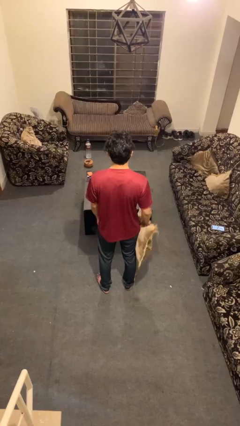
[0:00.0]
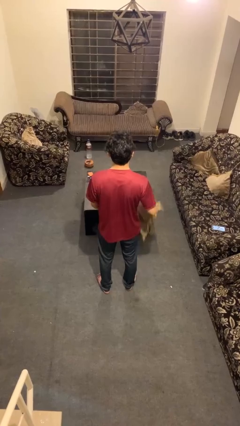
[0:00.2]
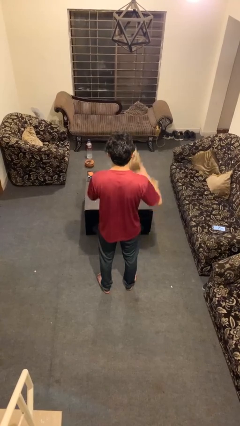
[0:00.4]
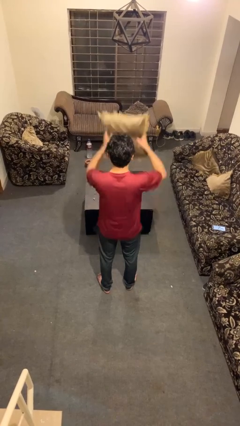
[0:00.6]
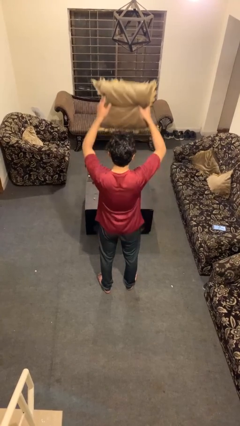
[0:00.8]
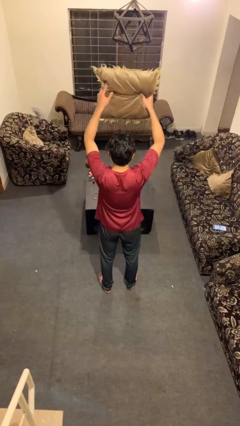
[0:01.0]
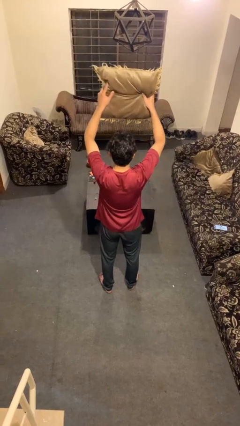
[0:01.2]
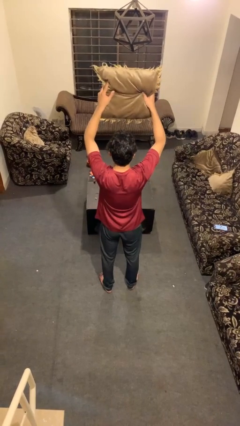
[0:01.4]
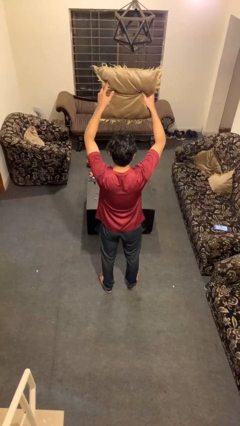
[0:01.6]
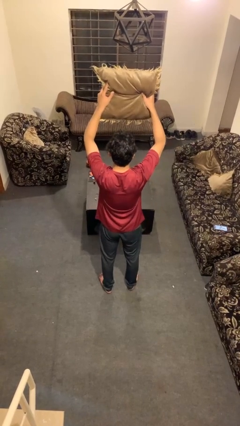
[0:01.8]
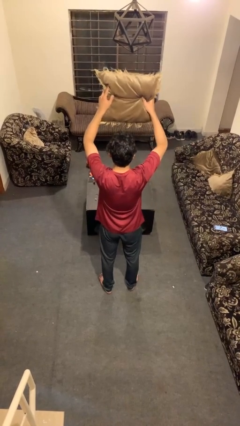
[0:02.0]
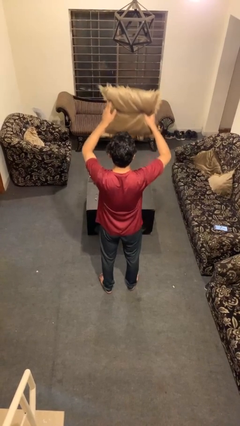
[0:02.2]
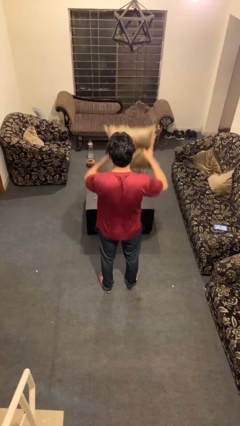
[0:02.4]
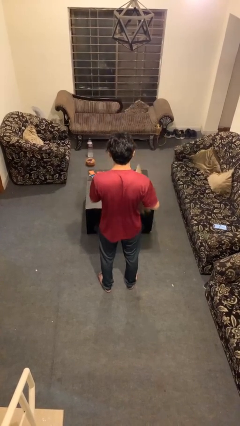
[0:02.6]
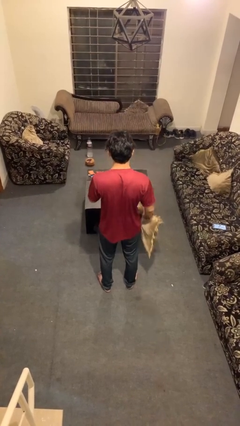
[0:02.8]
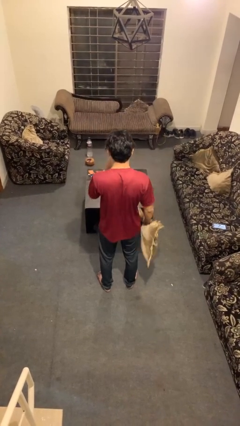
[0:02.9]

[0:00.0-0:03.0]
person holds object above head

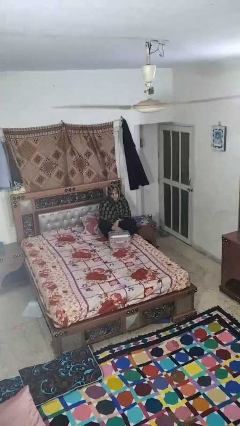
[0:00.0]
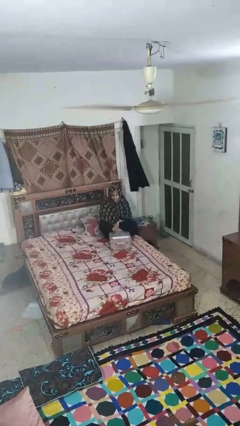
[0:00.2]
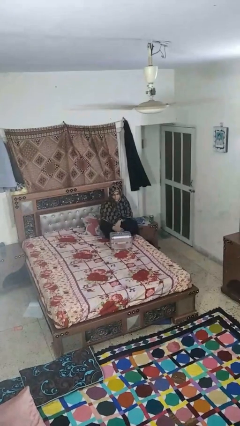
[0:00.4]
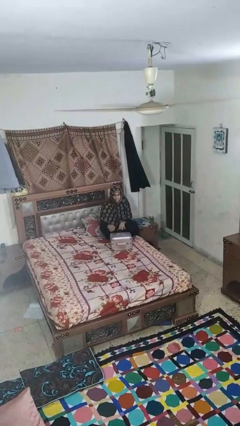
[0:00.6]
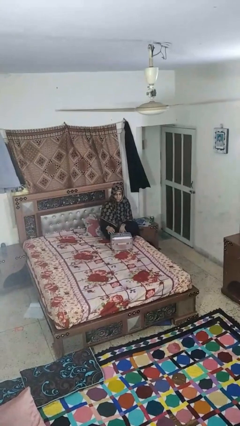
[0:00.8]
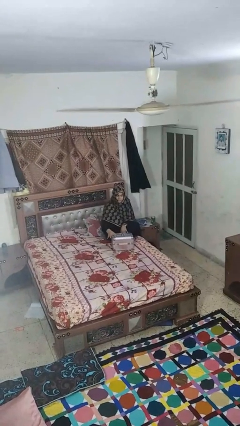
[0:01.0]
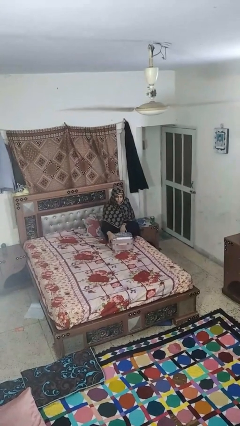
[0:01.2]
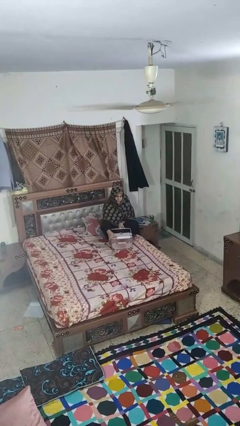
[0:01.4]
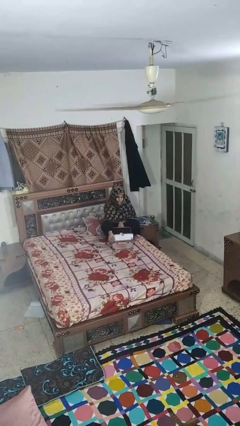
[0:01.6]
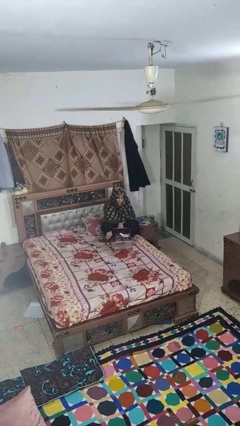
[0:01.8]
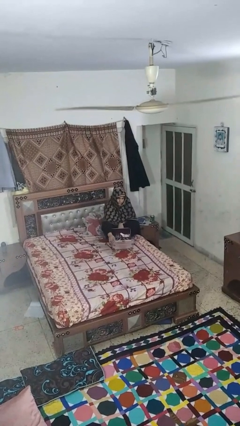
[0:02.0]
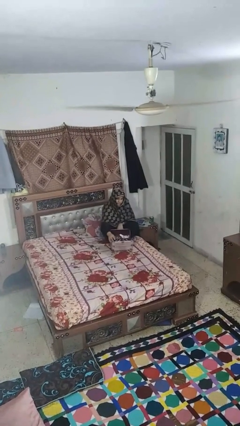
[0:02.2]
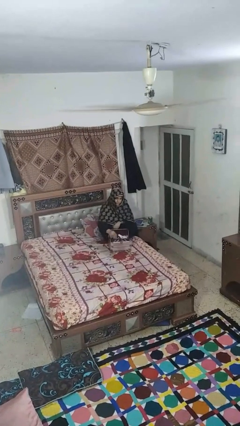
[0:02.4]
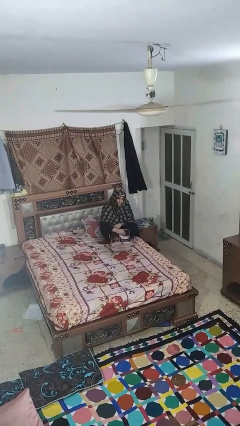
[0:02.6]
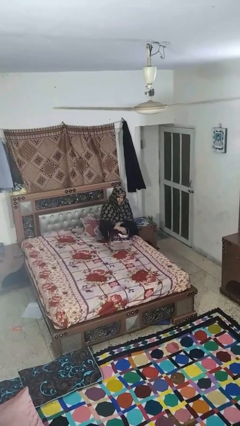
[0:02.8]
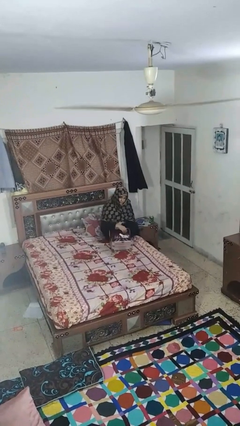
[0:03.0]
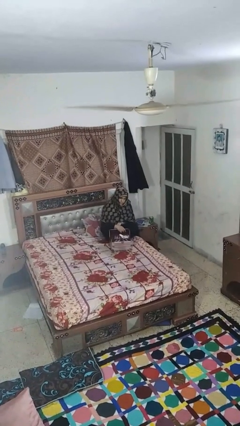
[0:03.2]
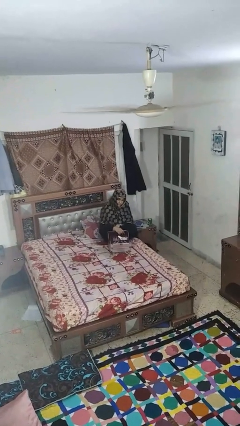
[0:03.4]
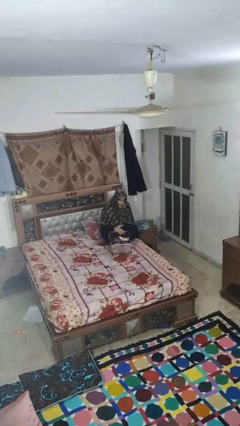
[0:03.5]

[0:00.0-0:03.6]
person opens jewelry box

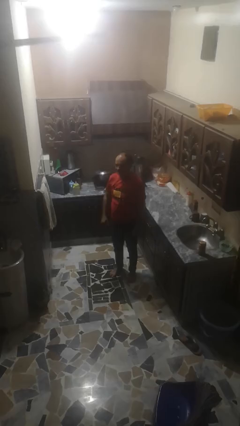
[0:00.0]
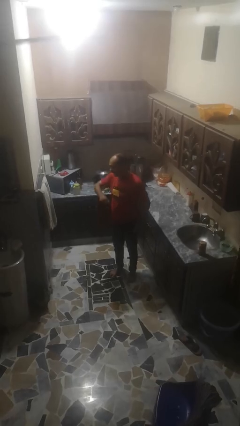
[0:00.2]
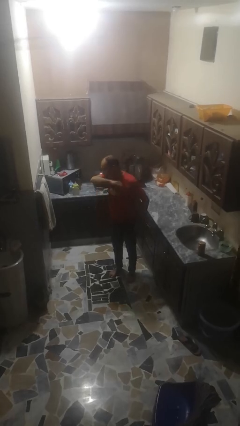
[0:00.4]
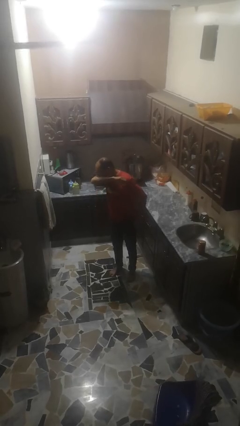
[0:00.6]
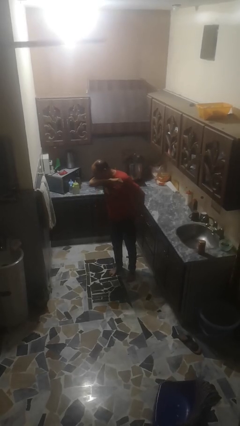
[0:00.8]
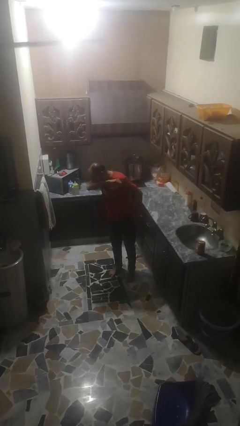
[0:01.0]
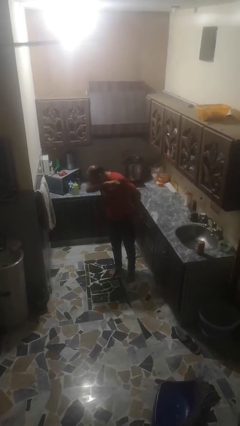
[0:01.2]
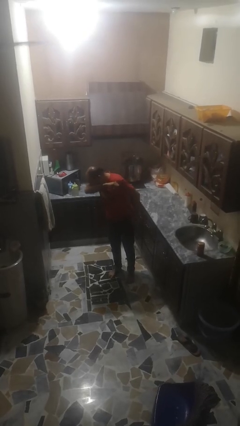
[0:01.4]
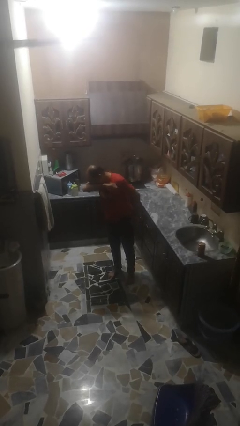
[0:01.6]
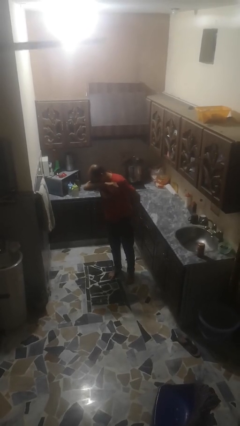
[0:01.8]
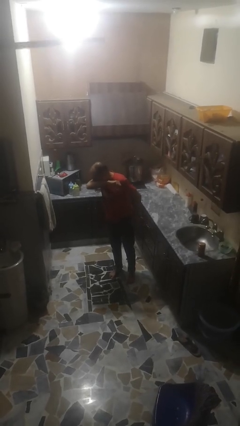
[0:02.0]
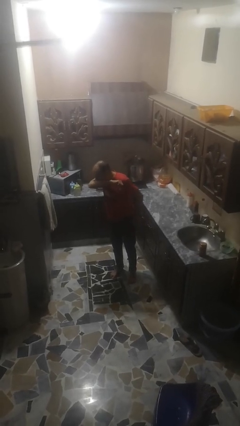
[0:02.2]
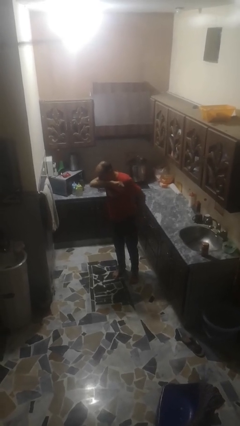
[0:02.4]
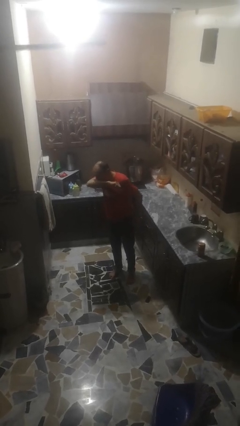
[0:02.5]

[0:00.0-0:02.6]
person sneezes into arm

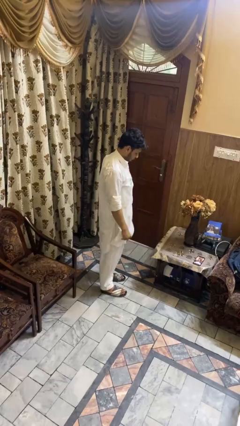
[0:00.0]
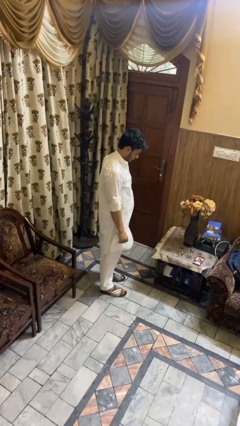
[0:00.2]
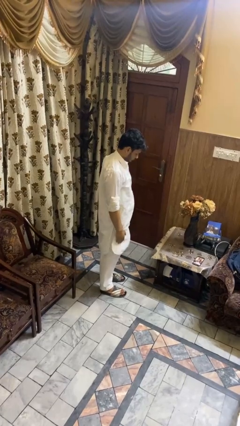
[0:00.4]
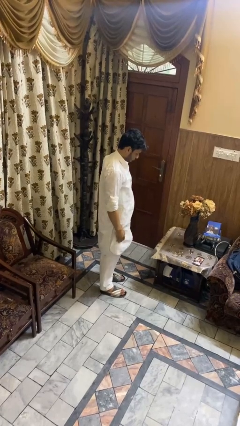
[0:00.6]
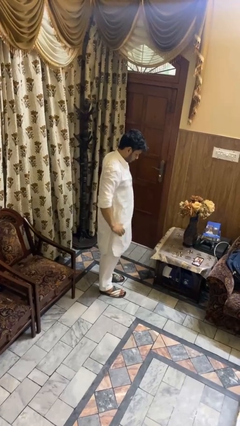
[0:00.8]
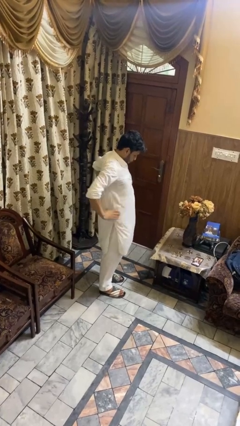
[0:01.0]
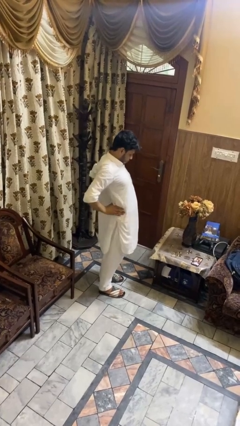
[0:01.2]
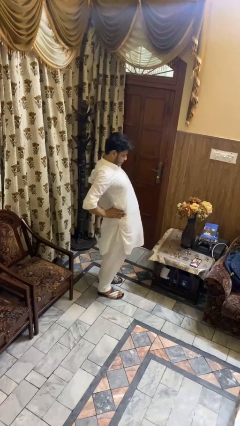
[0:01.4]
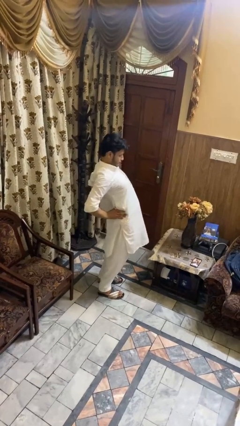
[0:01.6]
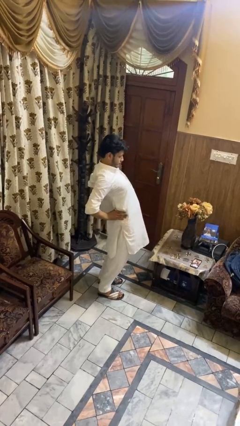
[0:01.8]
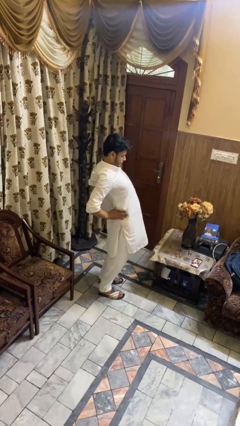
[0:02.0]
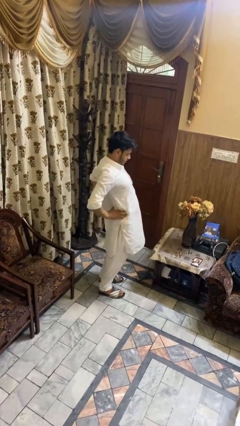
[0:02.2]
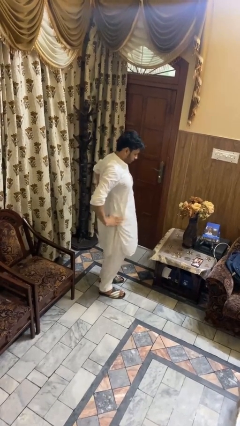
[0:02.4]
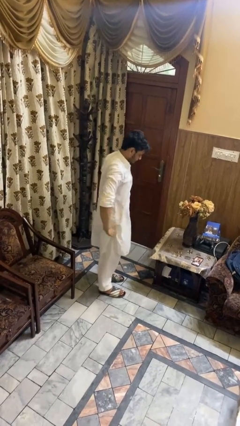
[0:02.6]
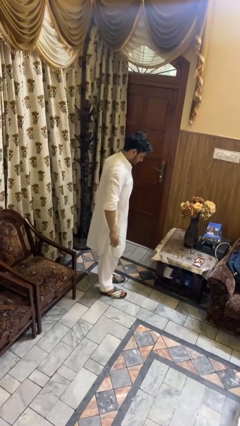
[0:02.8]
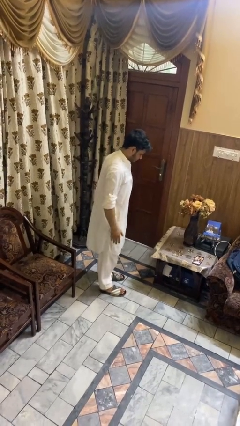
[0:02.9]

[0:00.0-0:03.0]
person stretches back

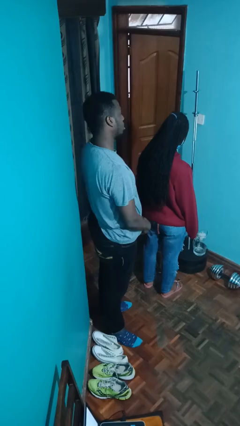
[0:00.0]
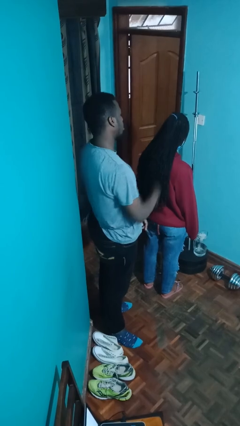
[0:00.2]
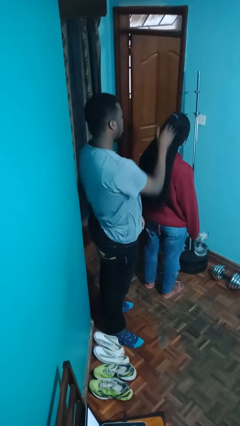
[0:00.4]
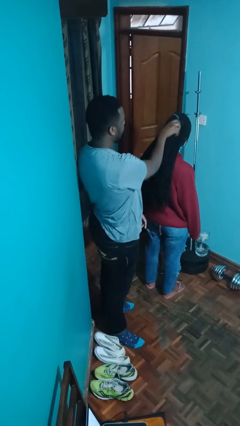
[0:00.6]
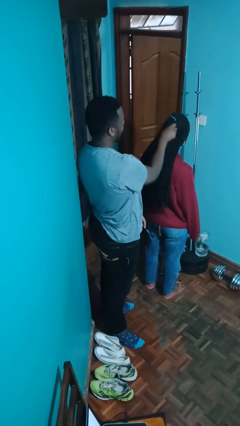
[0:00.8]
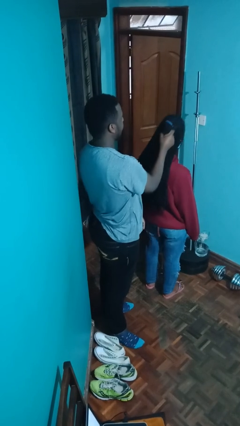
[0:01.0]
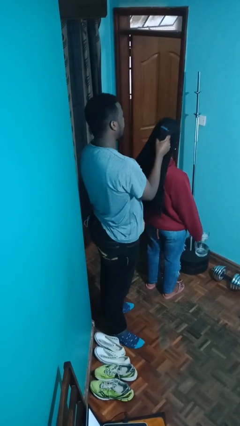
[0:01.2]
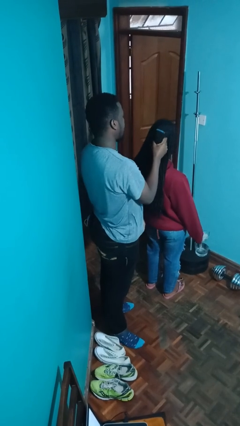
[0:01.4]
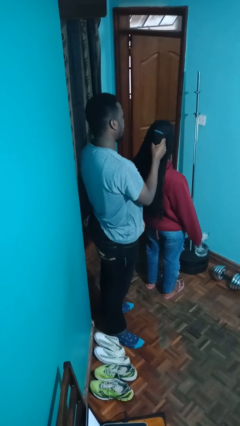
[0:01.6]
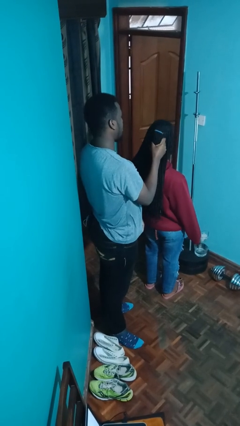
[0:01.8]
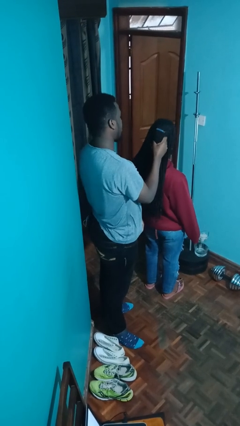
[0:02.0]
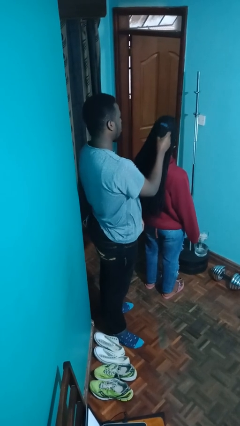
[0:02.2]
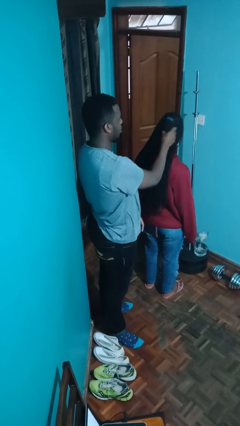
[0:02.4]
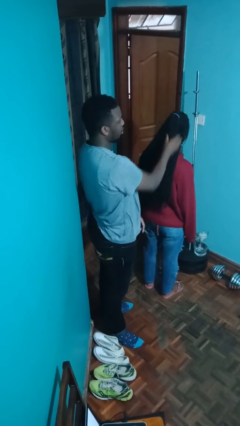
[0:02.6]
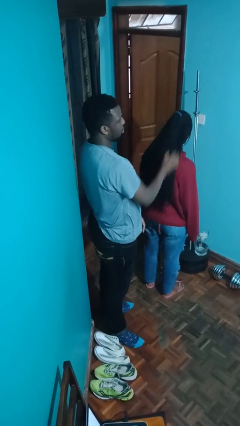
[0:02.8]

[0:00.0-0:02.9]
person grabs person by hair

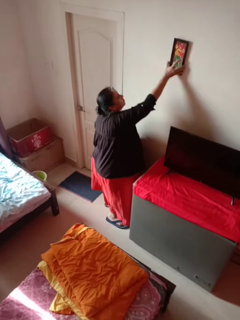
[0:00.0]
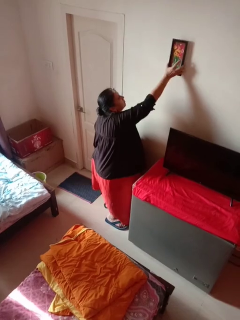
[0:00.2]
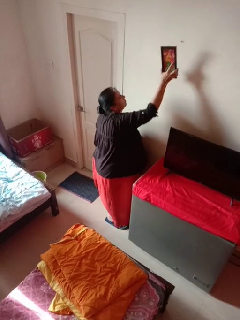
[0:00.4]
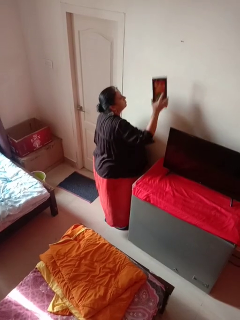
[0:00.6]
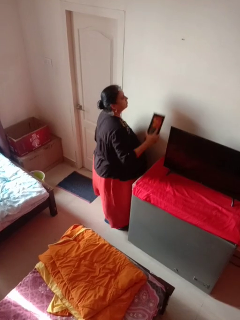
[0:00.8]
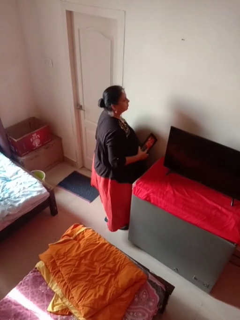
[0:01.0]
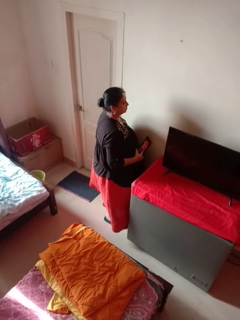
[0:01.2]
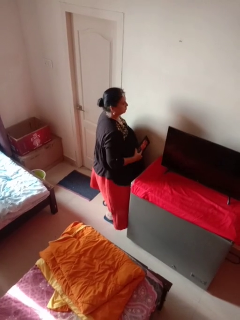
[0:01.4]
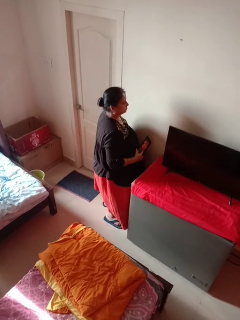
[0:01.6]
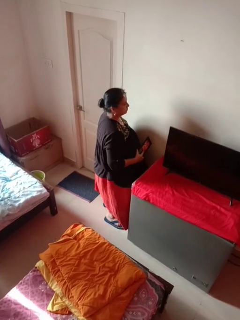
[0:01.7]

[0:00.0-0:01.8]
person takes down picture frame

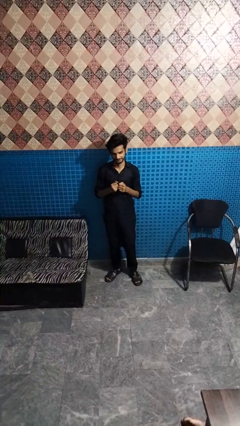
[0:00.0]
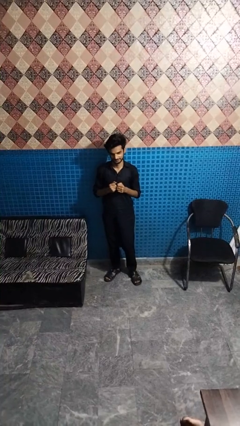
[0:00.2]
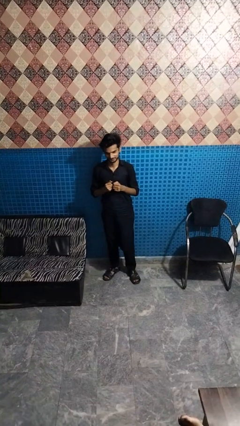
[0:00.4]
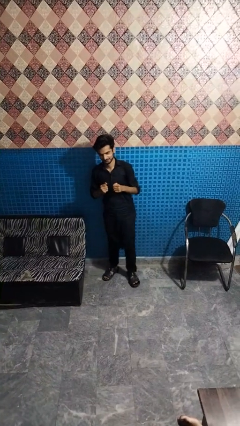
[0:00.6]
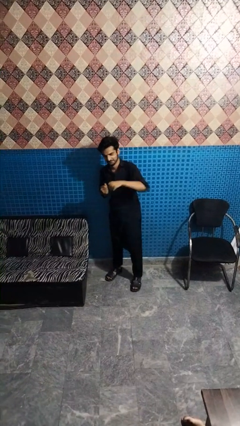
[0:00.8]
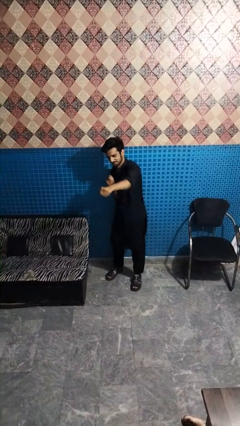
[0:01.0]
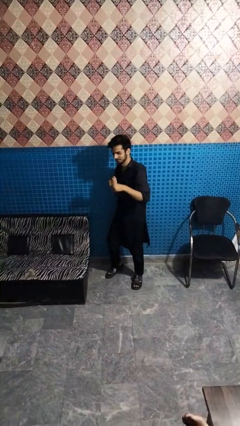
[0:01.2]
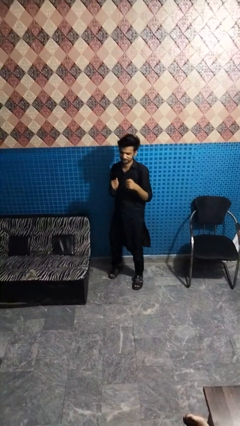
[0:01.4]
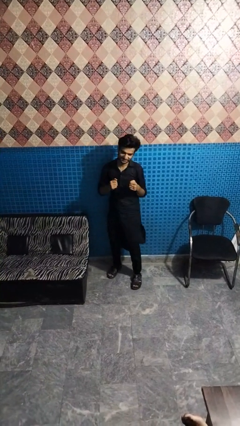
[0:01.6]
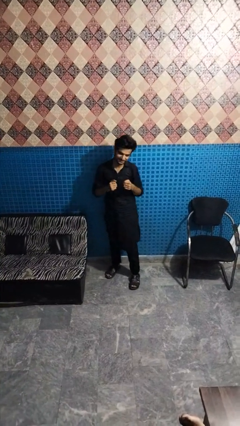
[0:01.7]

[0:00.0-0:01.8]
person punches
